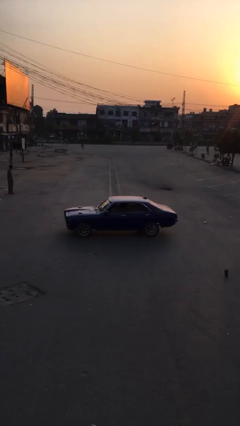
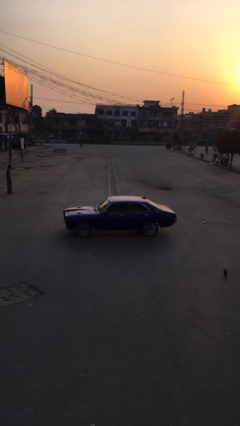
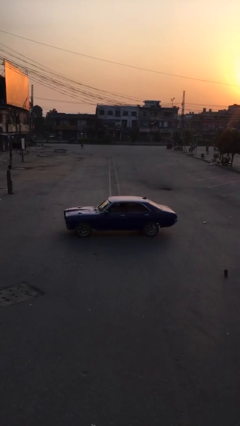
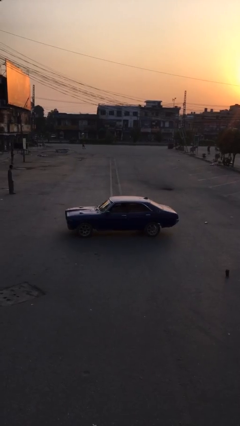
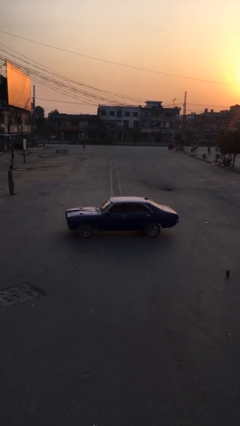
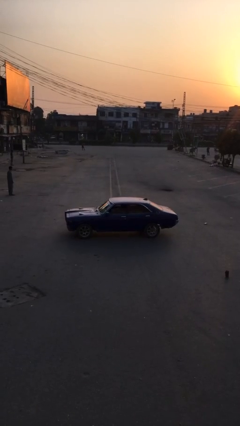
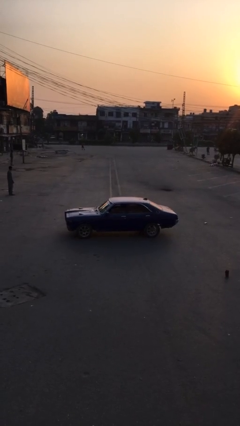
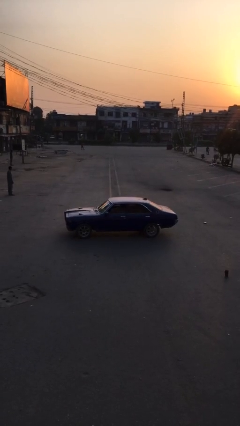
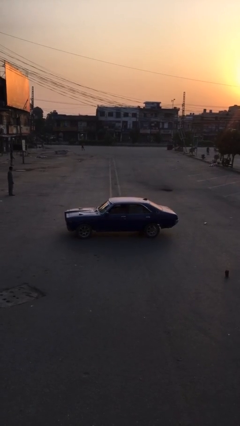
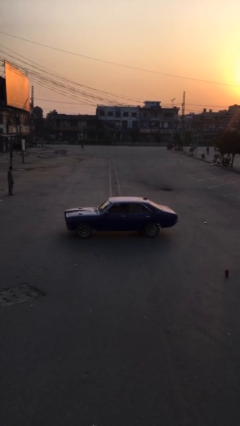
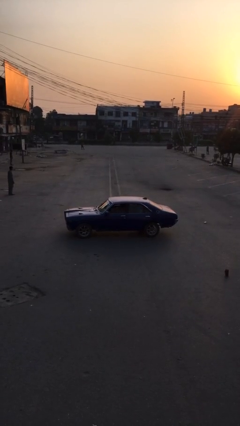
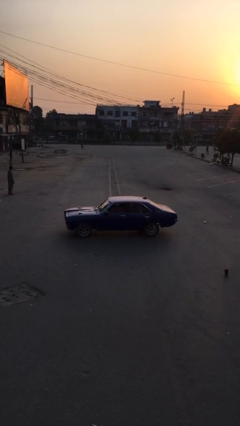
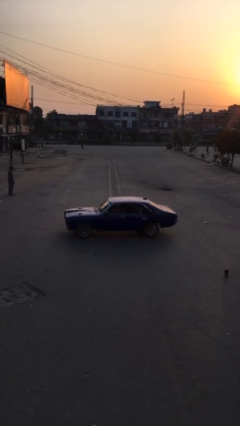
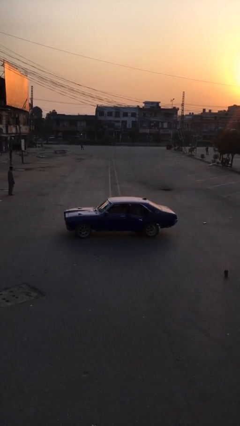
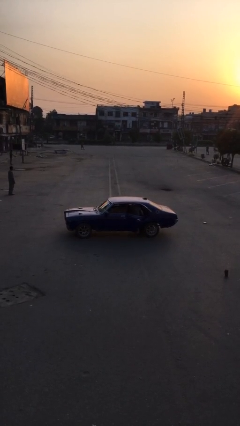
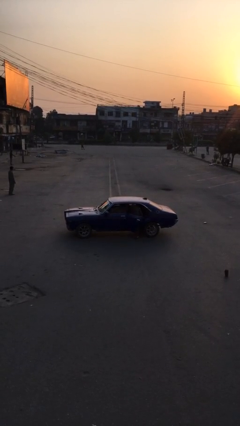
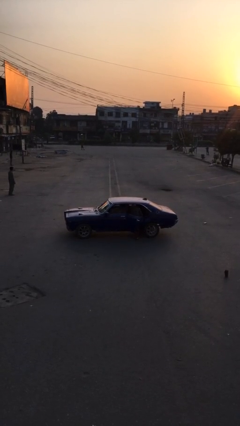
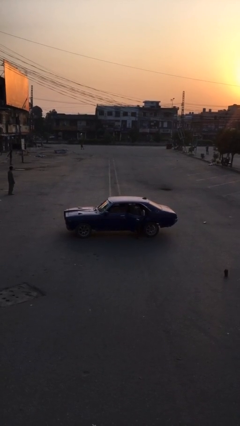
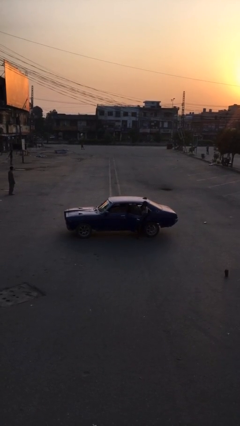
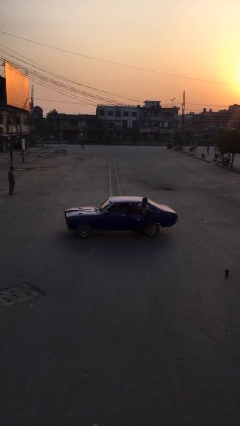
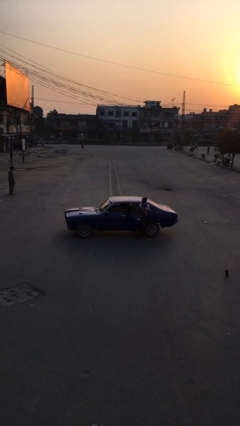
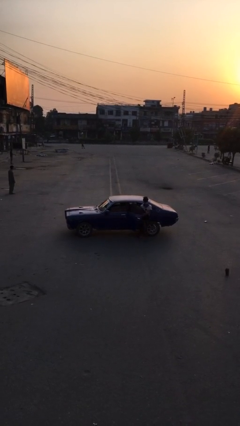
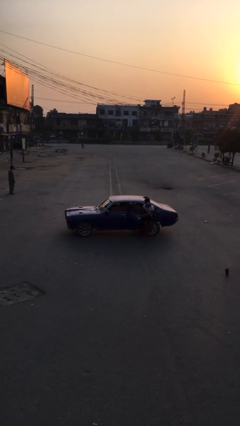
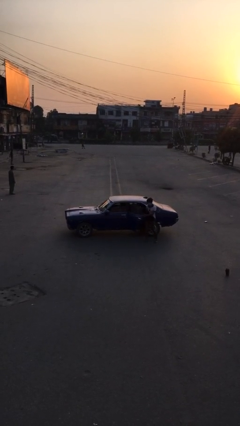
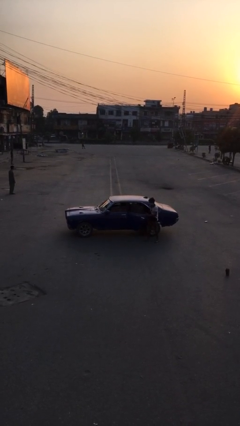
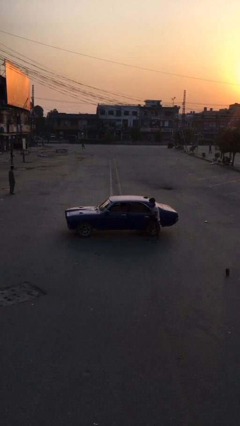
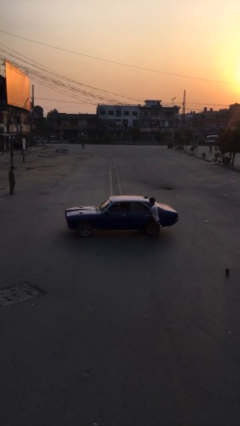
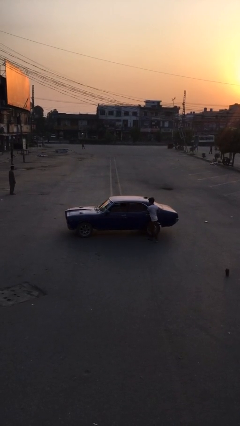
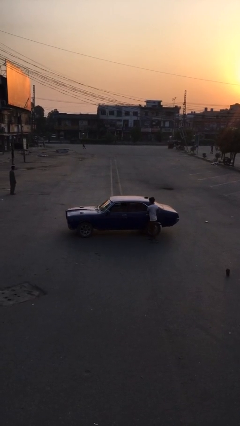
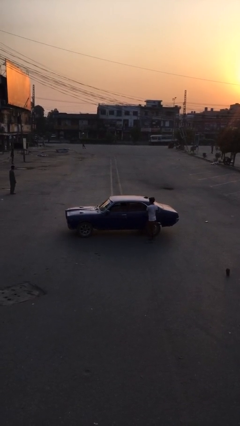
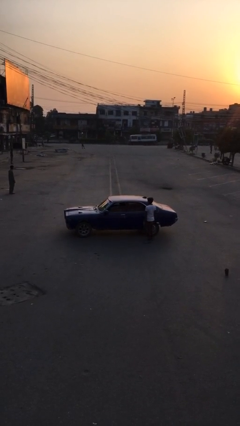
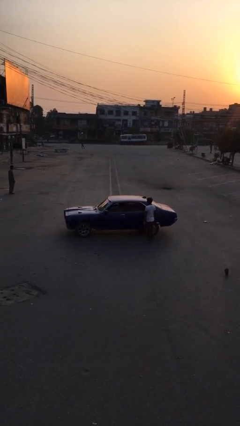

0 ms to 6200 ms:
car drops off person

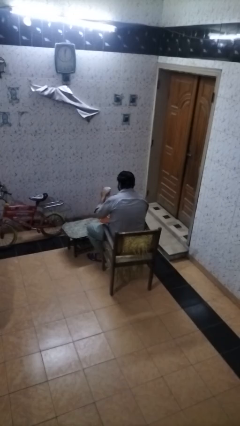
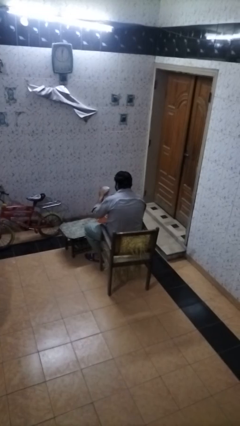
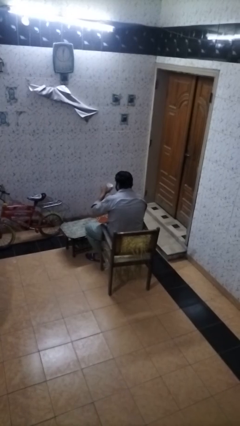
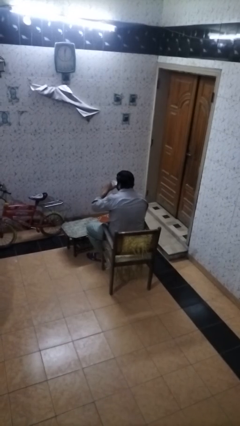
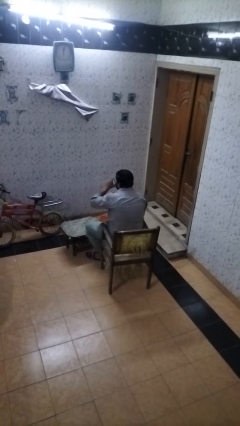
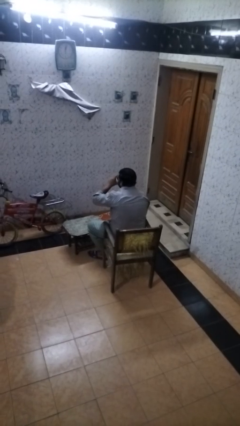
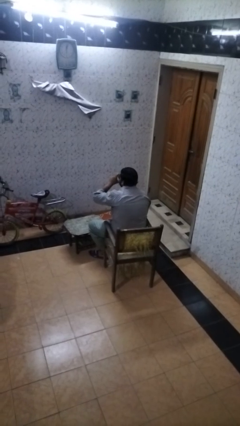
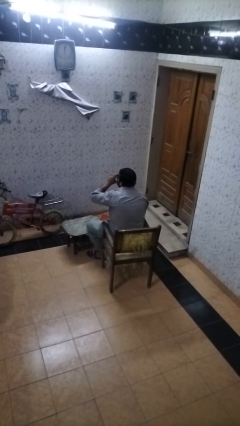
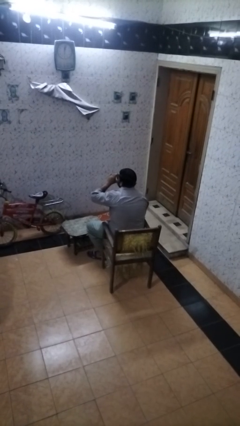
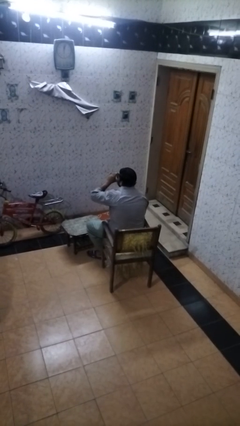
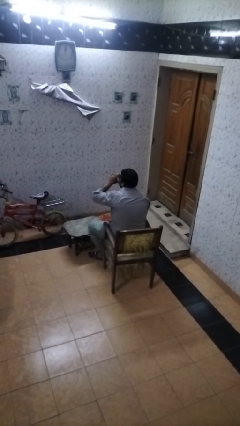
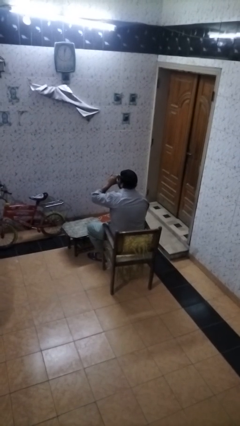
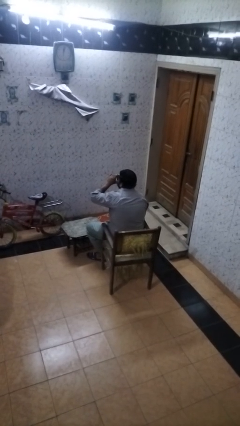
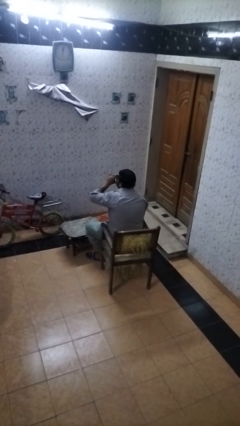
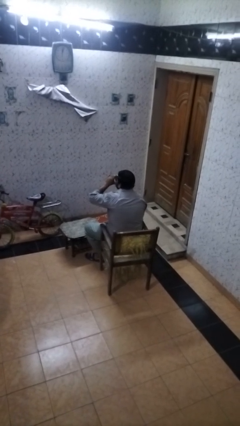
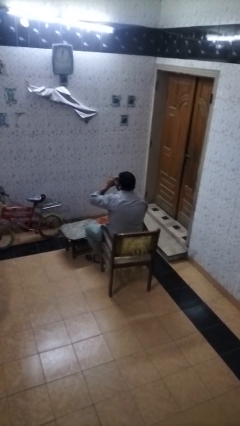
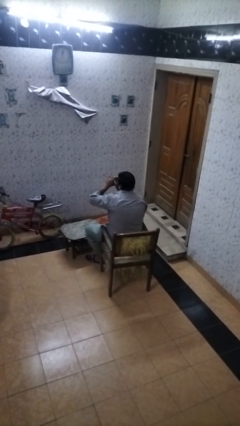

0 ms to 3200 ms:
person drinks from mug

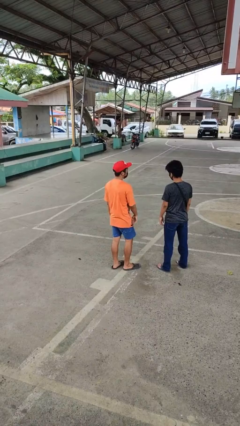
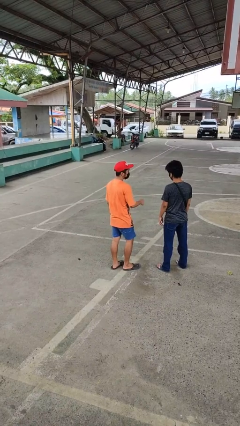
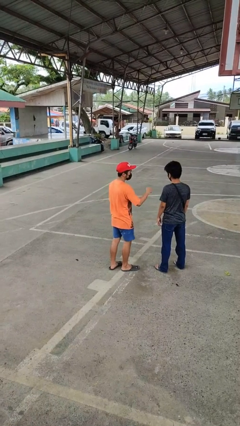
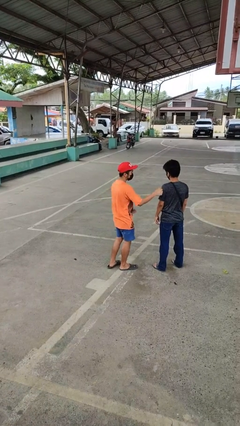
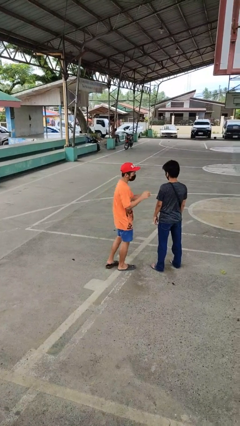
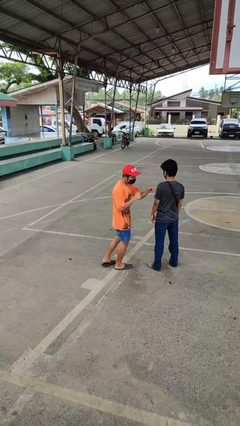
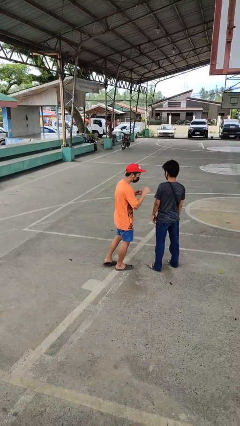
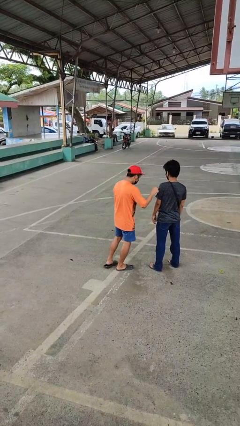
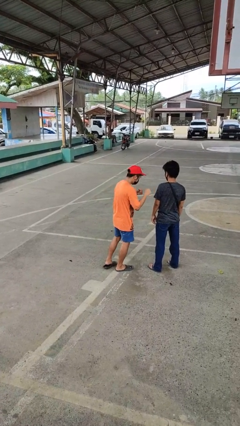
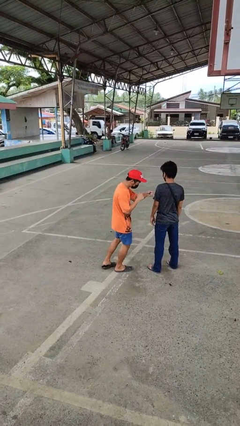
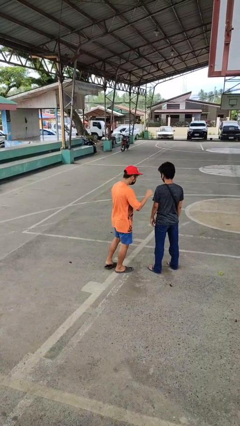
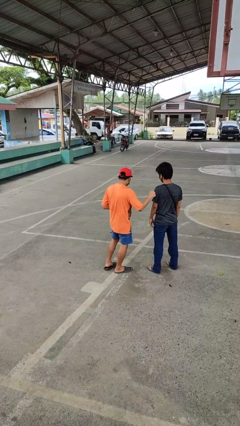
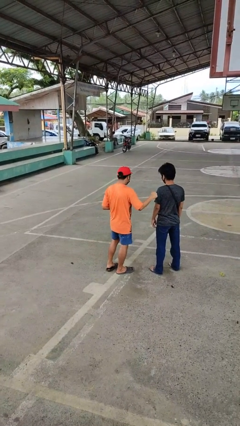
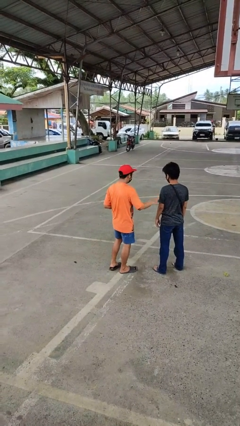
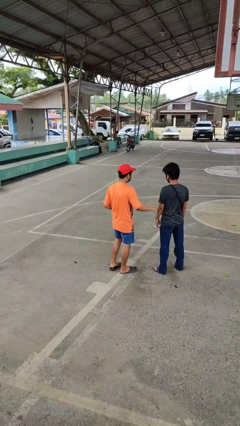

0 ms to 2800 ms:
person pounds shoulders of person

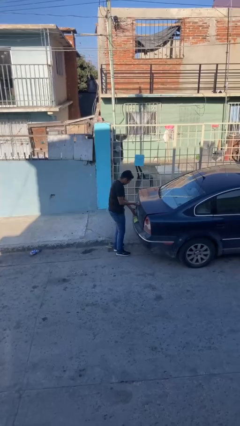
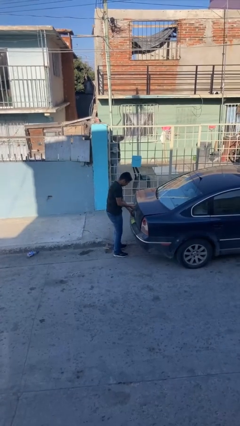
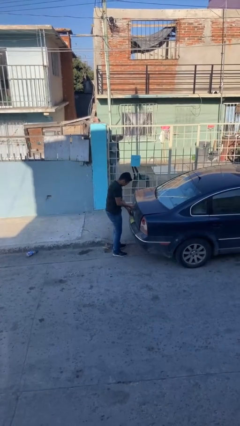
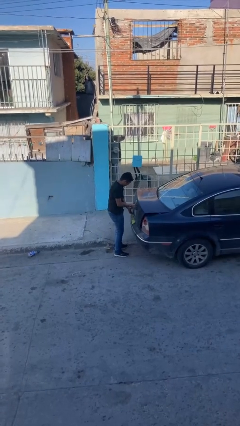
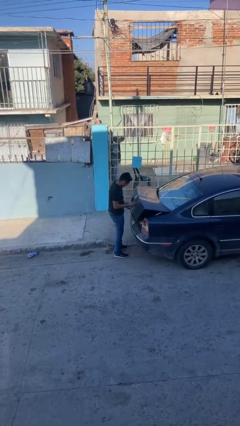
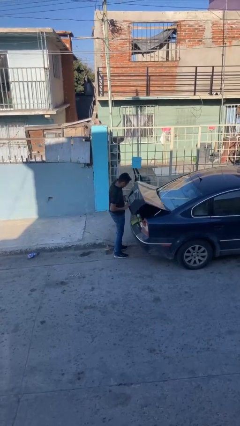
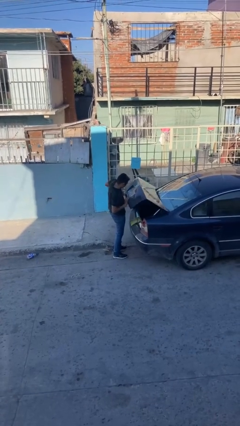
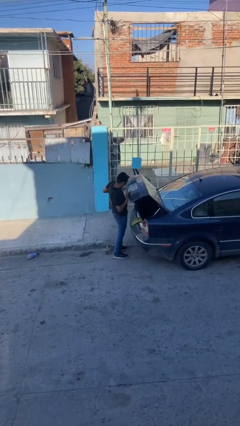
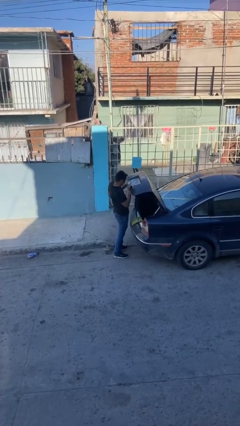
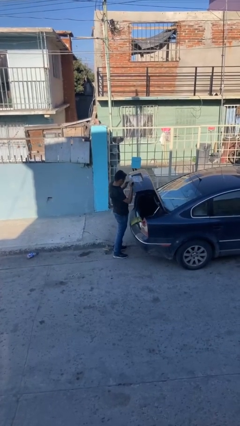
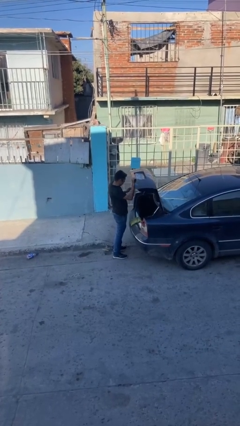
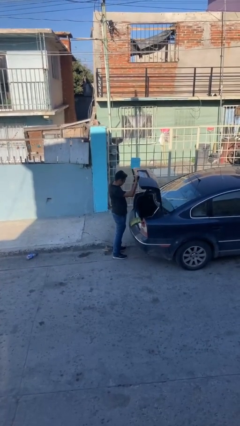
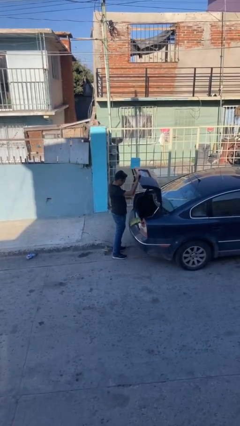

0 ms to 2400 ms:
person opens car trunk

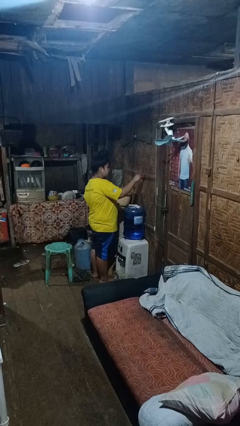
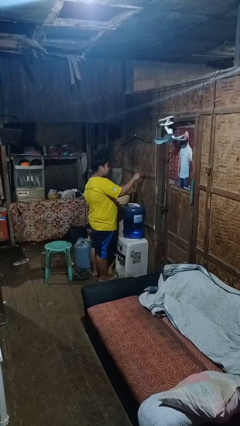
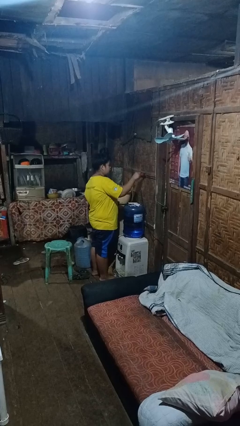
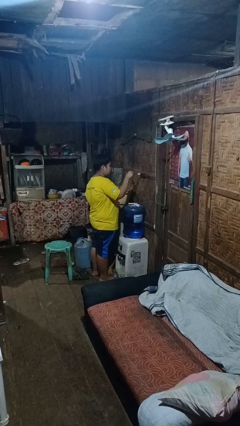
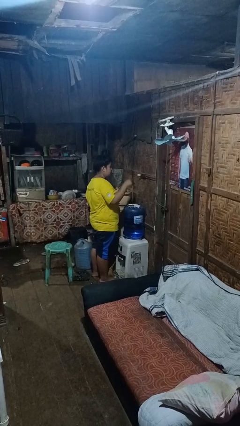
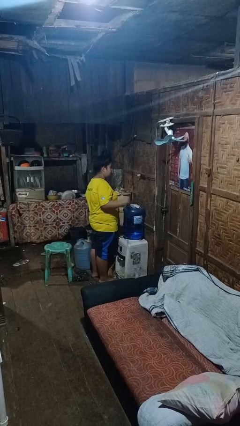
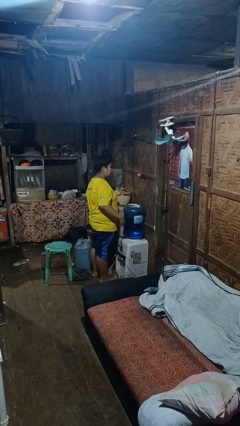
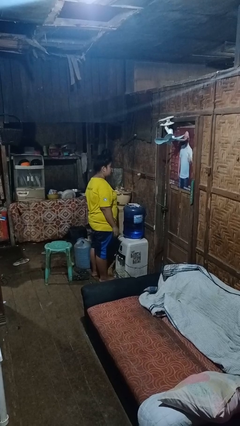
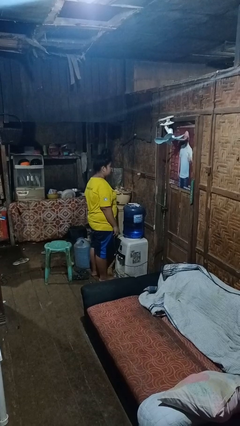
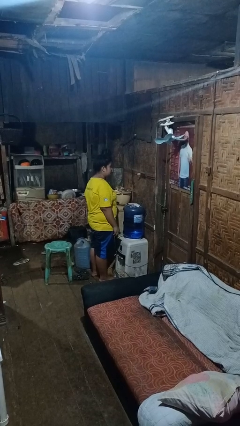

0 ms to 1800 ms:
person unplugs from electrical socket

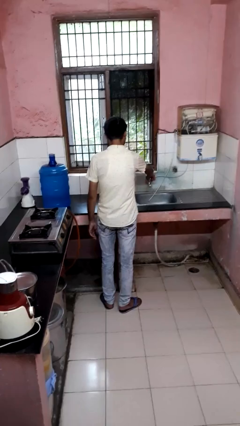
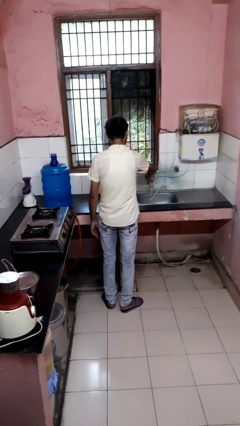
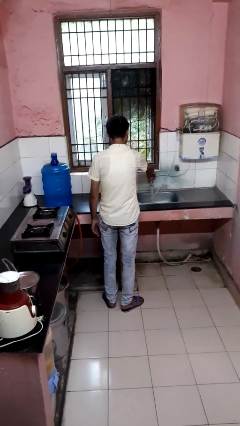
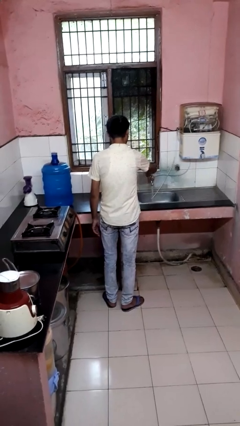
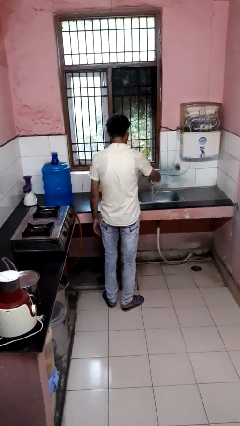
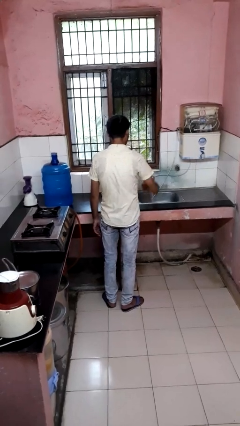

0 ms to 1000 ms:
person turns on faucet
